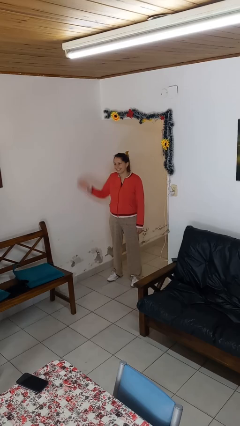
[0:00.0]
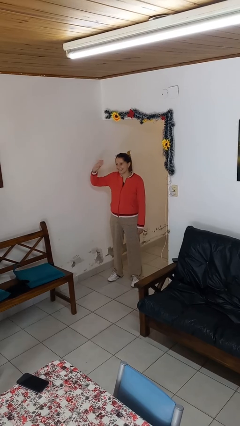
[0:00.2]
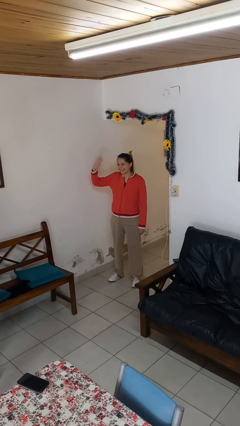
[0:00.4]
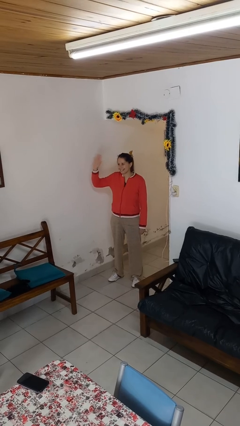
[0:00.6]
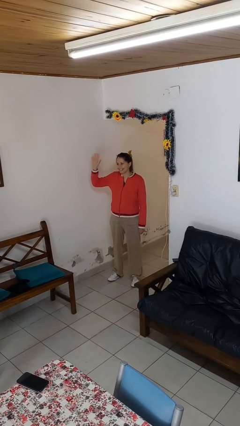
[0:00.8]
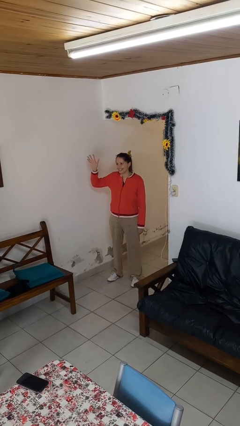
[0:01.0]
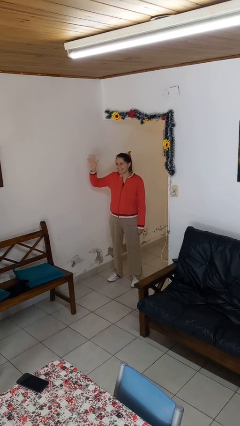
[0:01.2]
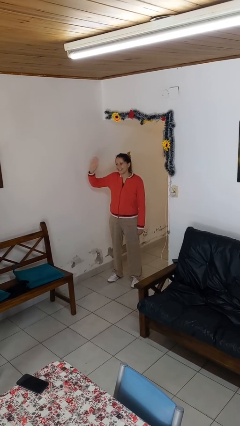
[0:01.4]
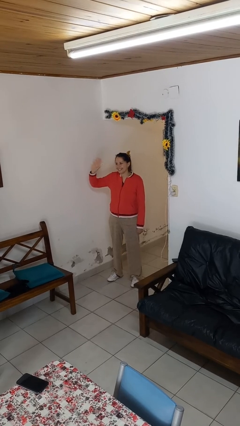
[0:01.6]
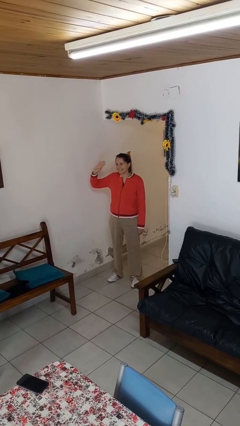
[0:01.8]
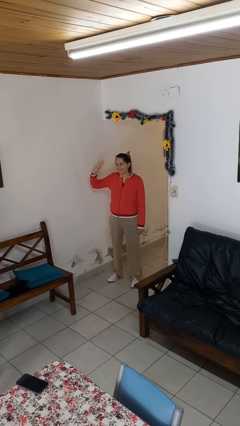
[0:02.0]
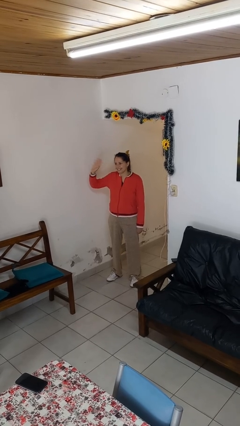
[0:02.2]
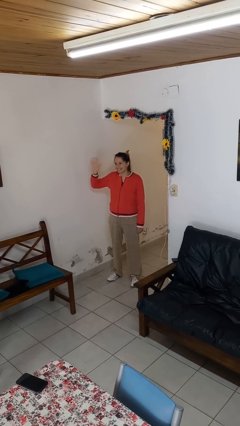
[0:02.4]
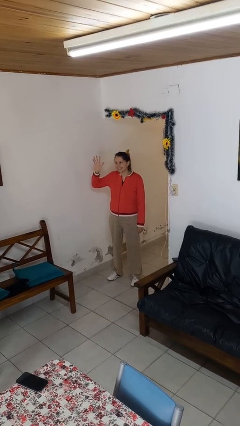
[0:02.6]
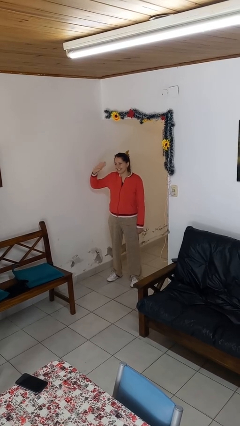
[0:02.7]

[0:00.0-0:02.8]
person waves at person

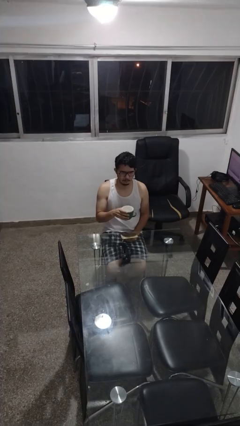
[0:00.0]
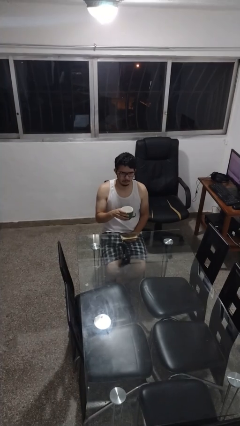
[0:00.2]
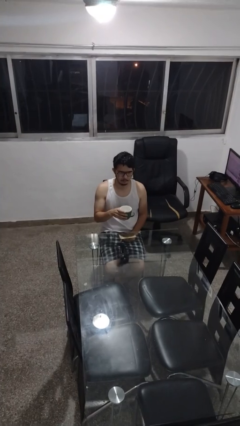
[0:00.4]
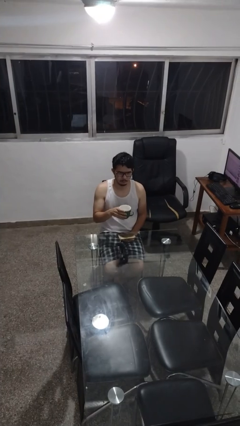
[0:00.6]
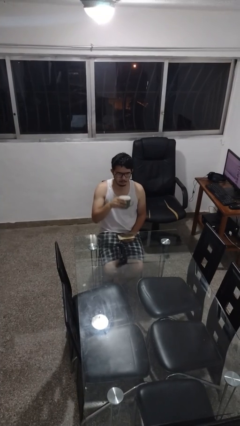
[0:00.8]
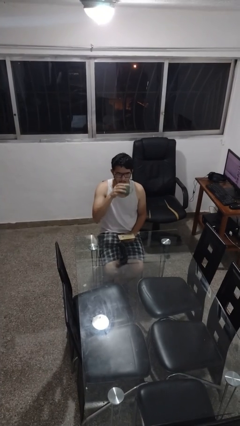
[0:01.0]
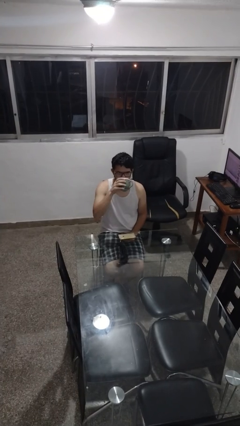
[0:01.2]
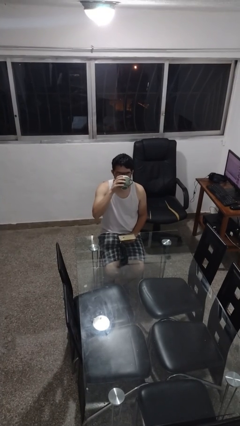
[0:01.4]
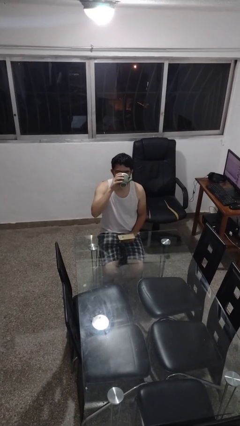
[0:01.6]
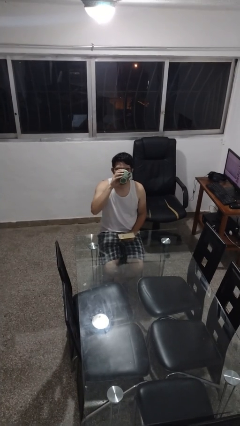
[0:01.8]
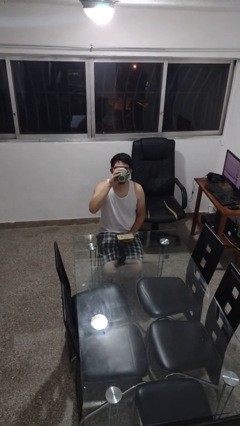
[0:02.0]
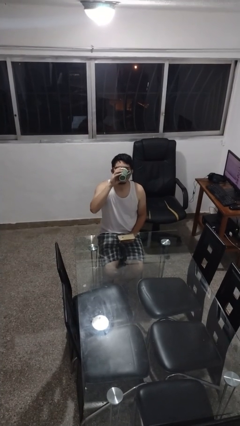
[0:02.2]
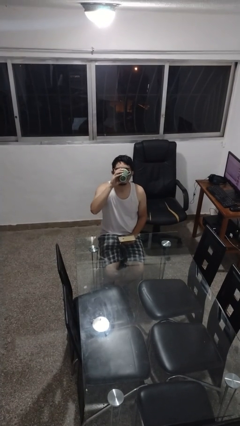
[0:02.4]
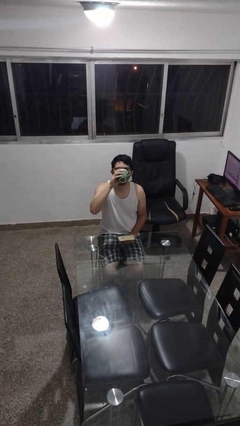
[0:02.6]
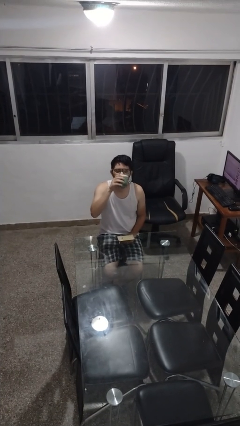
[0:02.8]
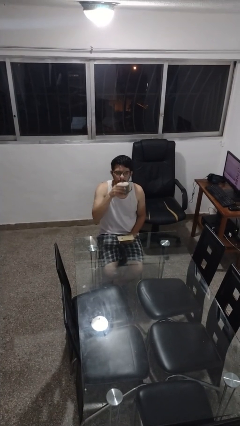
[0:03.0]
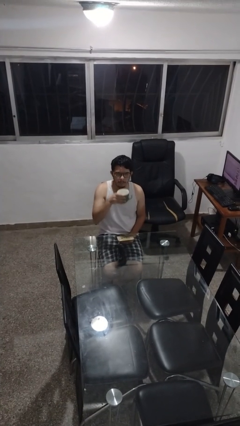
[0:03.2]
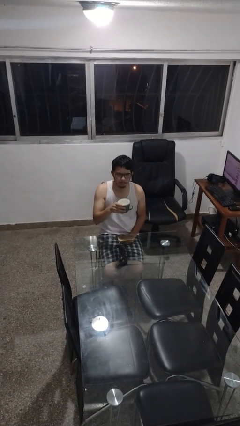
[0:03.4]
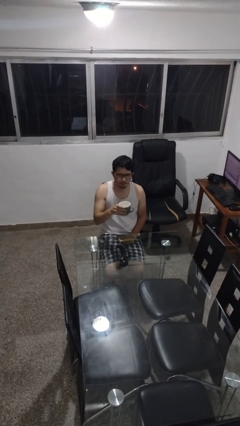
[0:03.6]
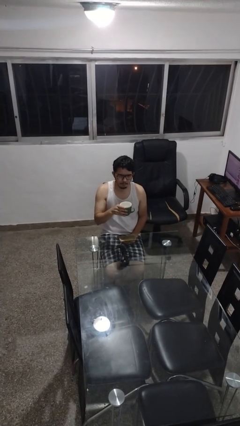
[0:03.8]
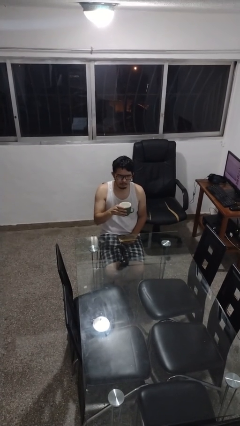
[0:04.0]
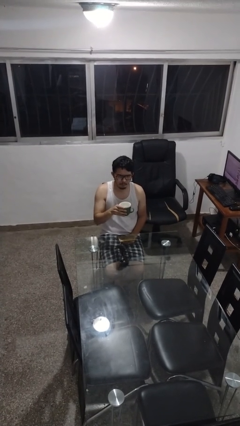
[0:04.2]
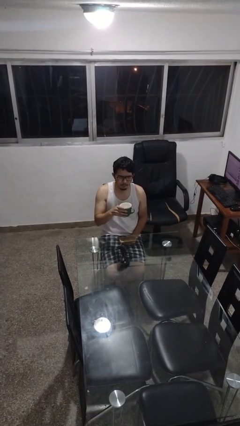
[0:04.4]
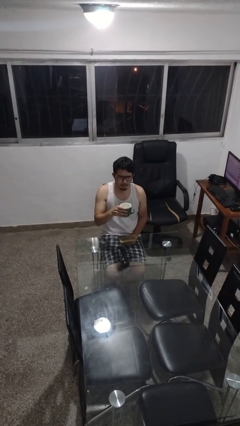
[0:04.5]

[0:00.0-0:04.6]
person drinks from mug

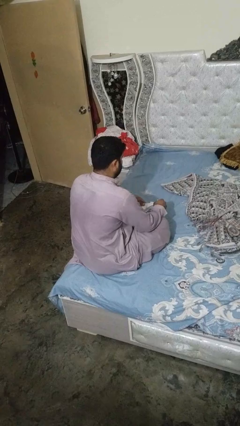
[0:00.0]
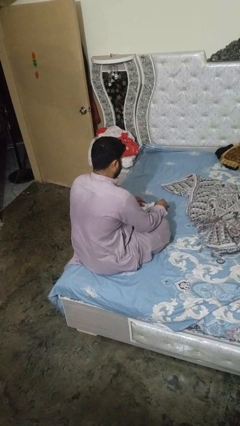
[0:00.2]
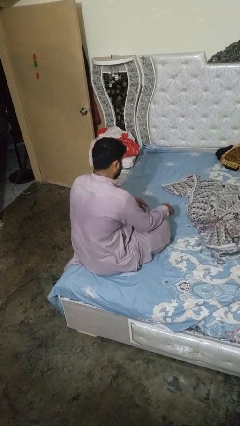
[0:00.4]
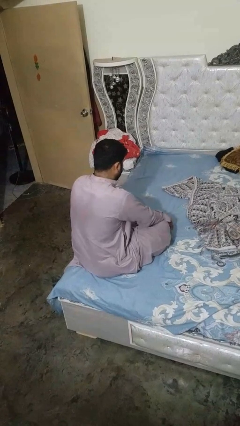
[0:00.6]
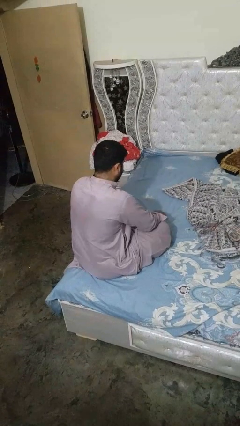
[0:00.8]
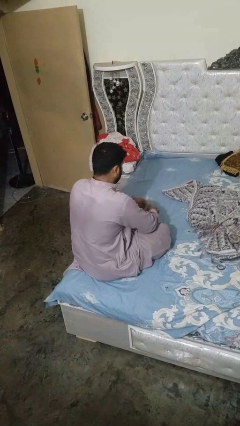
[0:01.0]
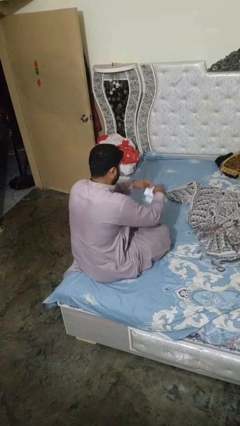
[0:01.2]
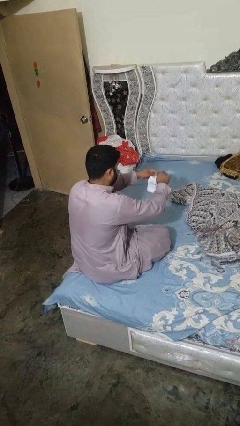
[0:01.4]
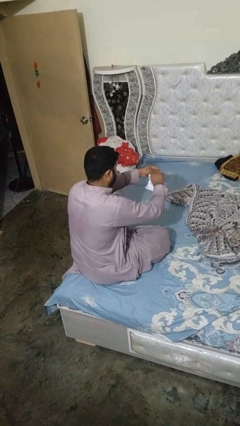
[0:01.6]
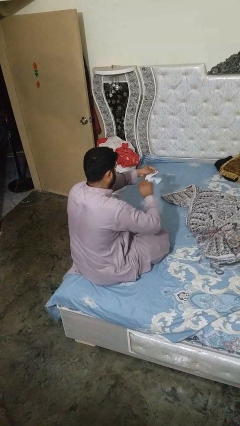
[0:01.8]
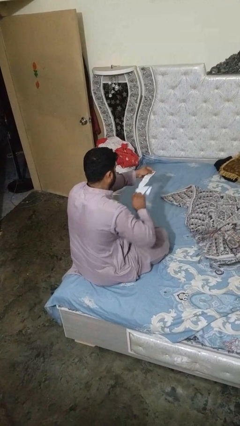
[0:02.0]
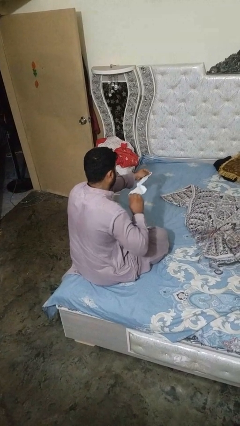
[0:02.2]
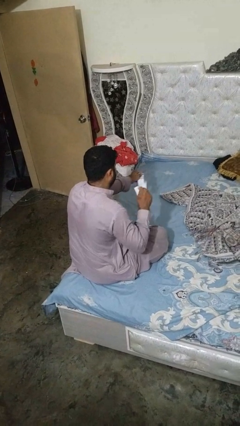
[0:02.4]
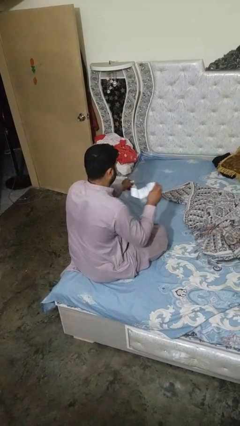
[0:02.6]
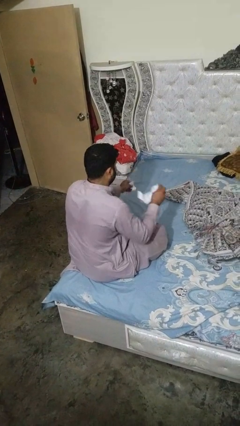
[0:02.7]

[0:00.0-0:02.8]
person tears paper

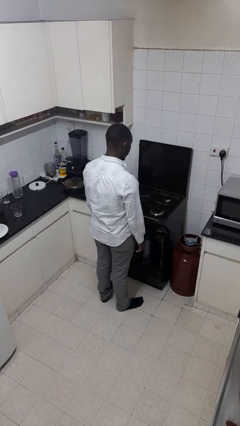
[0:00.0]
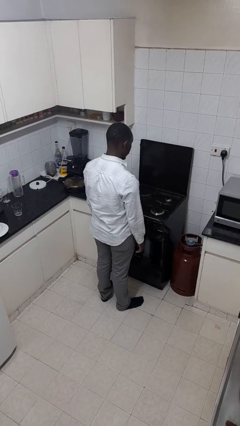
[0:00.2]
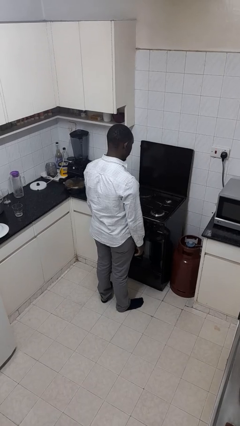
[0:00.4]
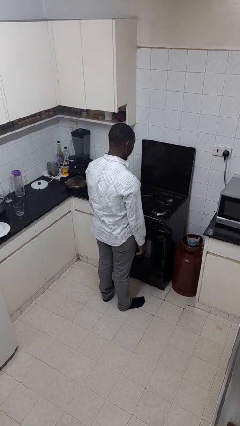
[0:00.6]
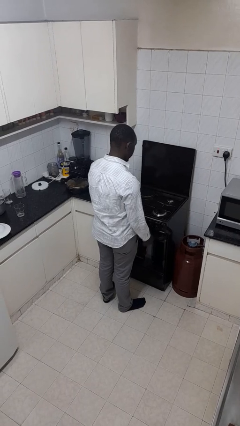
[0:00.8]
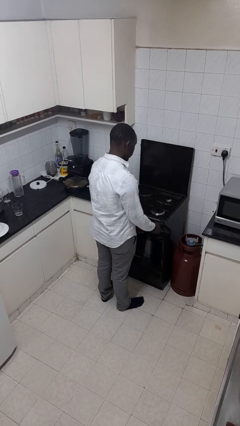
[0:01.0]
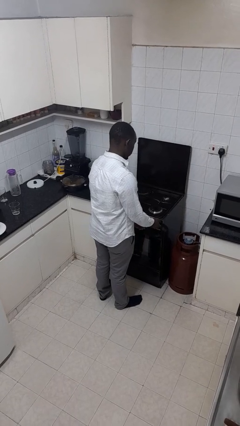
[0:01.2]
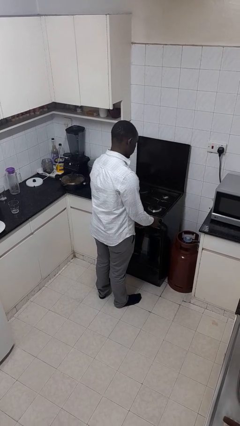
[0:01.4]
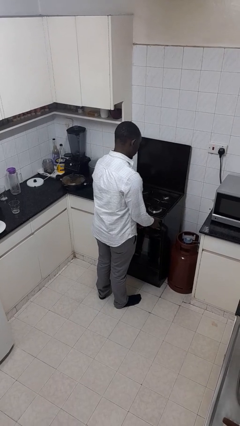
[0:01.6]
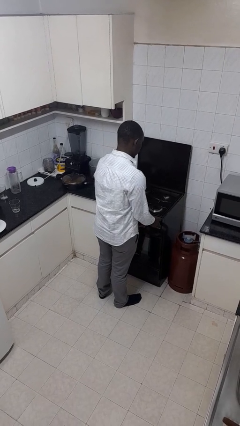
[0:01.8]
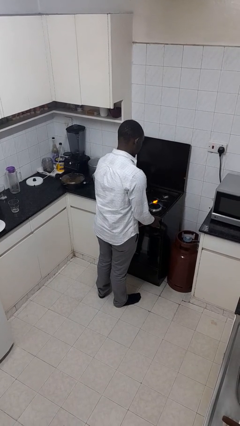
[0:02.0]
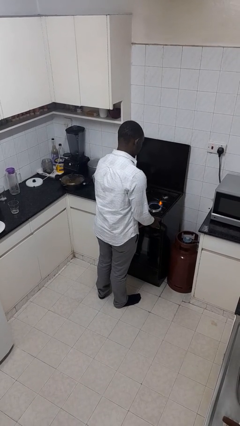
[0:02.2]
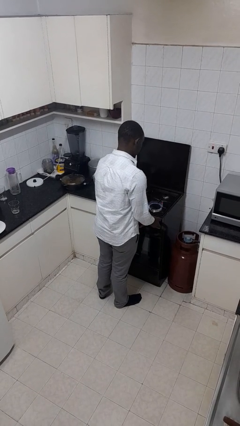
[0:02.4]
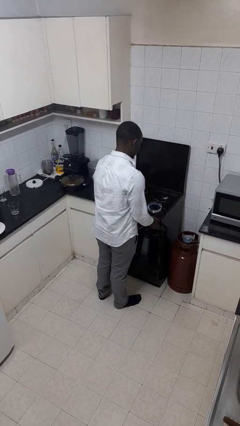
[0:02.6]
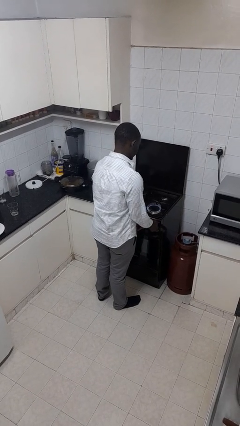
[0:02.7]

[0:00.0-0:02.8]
person turns on stovetop

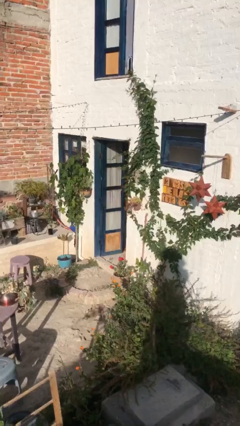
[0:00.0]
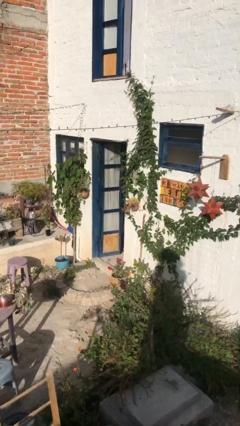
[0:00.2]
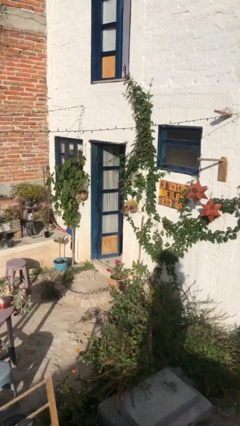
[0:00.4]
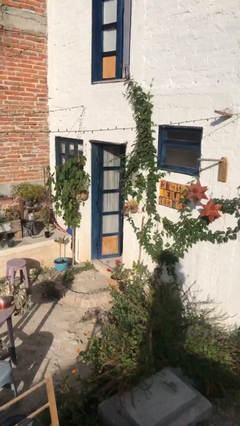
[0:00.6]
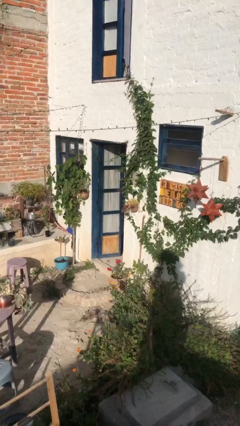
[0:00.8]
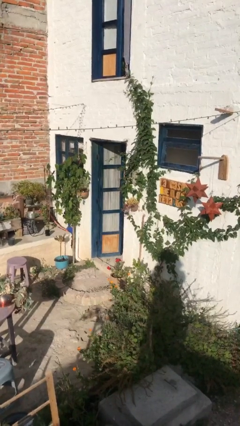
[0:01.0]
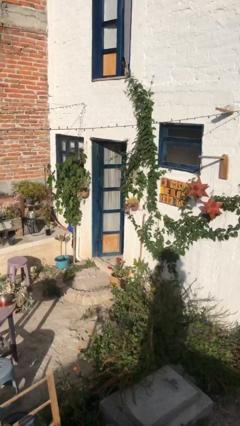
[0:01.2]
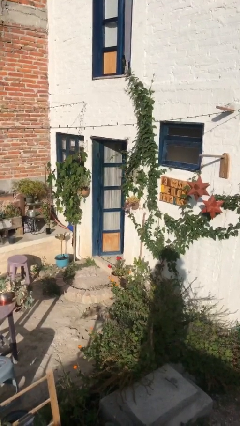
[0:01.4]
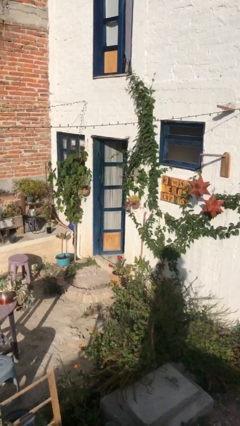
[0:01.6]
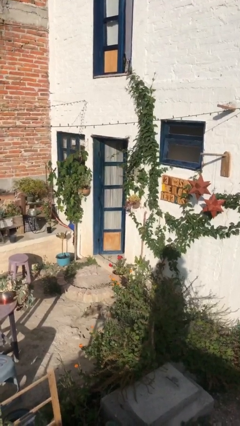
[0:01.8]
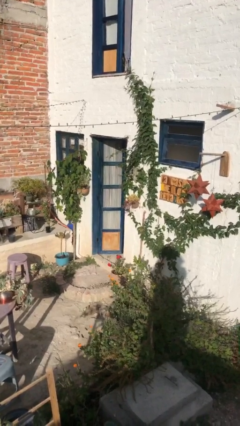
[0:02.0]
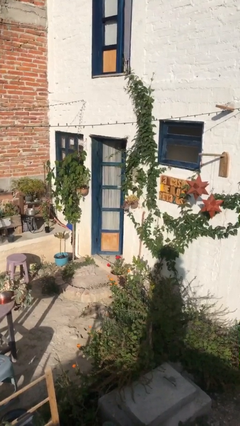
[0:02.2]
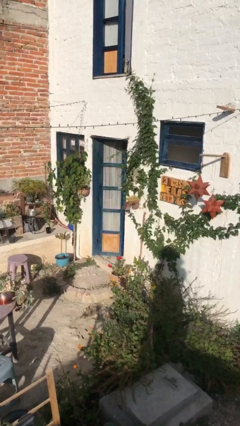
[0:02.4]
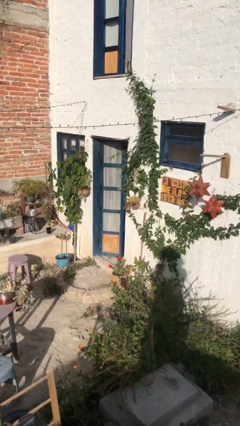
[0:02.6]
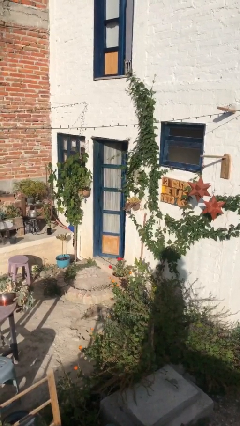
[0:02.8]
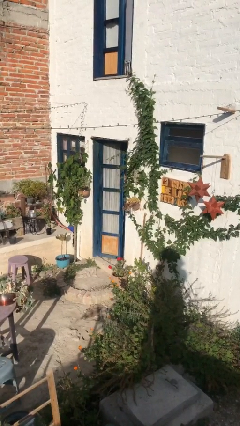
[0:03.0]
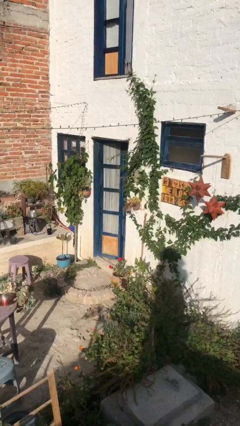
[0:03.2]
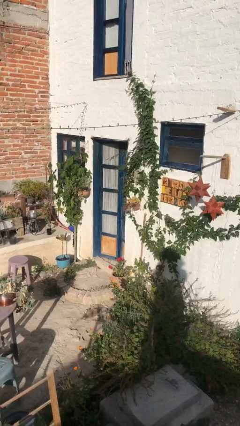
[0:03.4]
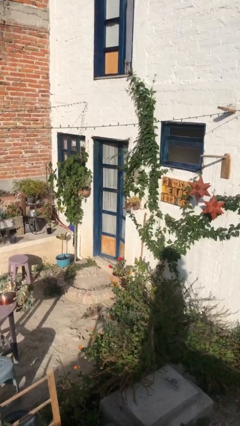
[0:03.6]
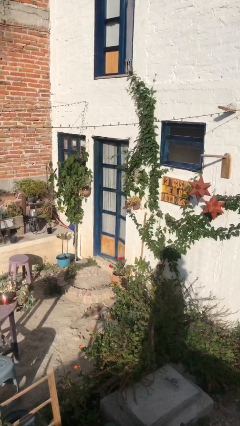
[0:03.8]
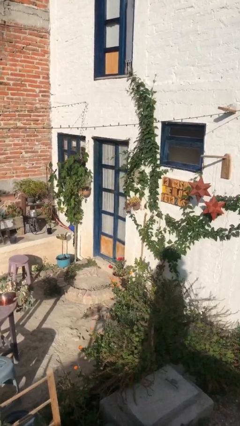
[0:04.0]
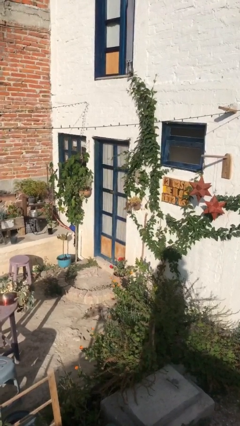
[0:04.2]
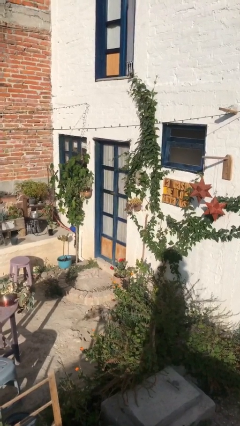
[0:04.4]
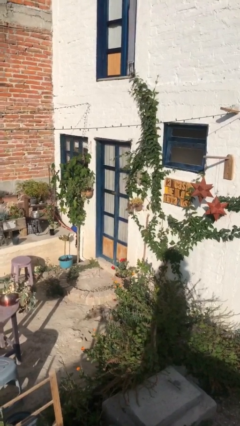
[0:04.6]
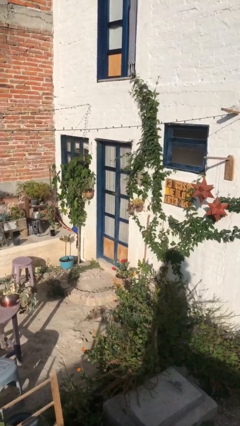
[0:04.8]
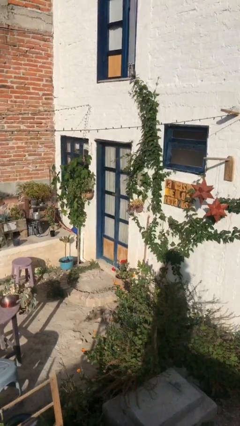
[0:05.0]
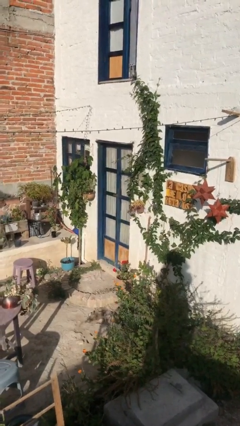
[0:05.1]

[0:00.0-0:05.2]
person closes facility door
